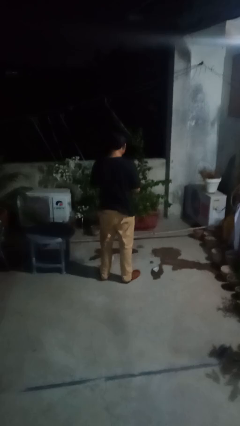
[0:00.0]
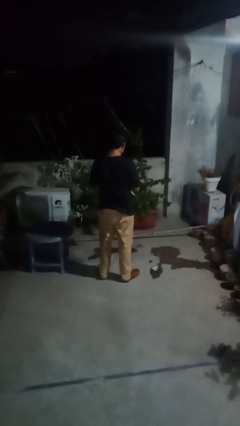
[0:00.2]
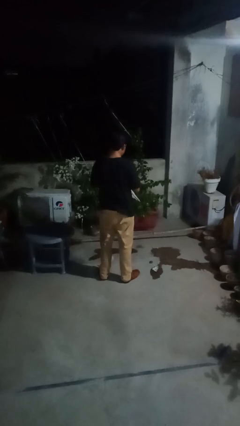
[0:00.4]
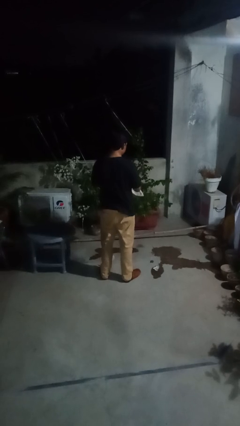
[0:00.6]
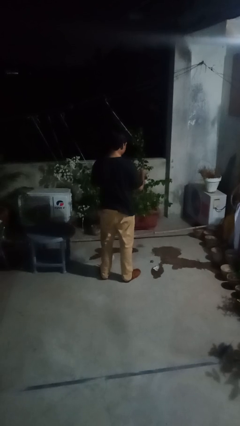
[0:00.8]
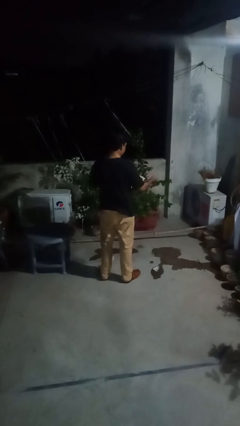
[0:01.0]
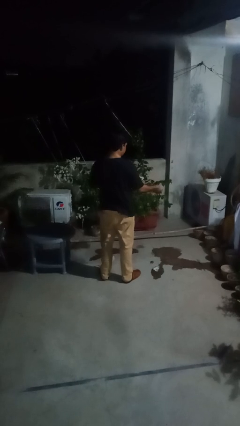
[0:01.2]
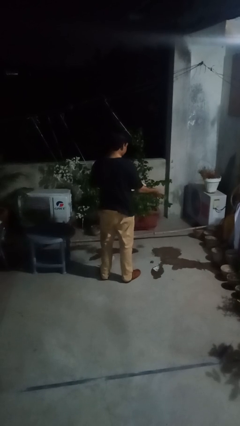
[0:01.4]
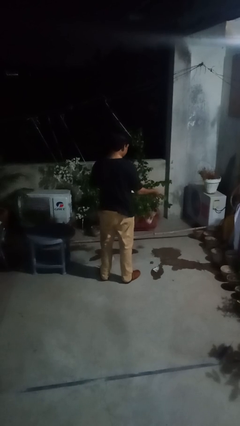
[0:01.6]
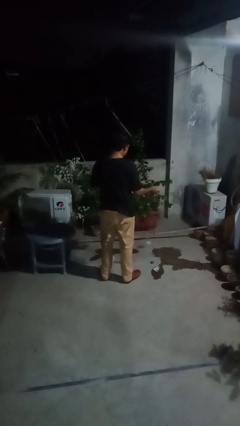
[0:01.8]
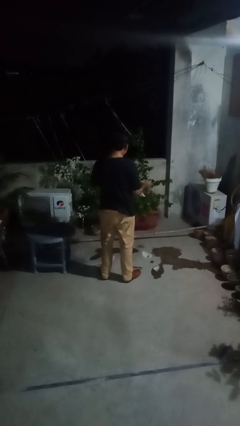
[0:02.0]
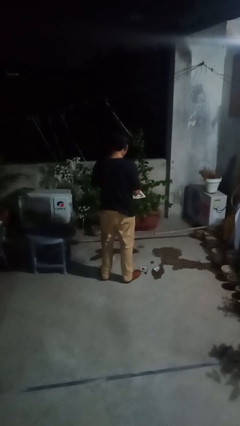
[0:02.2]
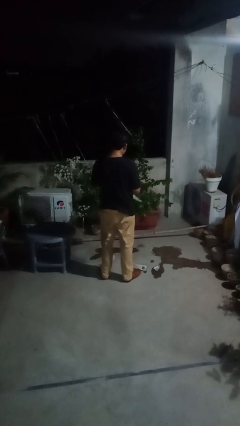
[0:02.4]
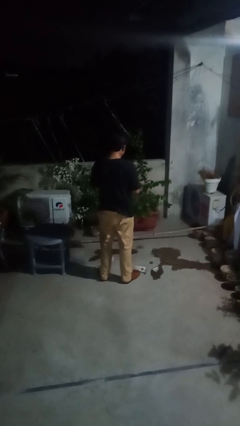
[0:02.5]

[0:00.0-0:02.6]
person tears paper

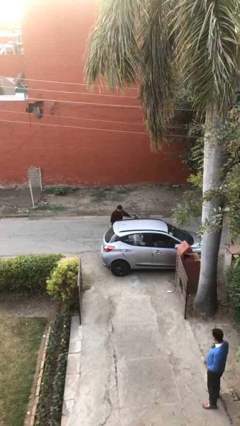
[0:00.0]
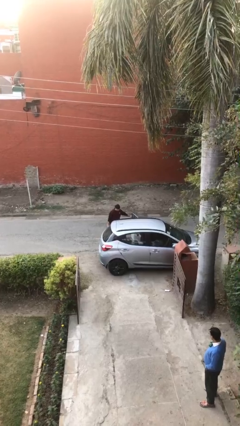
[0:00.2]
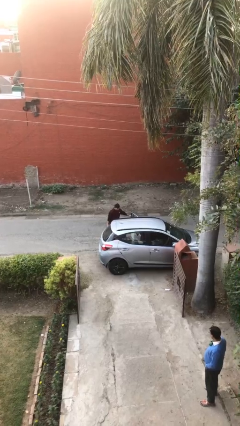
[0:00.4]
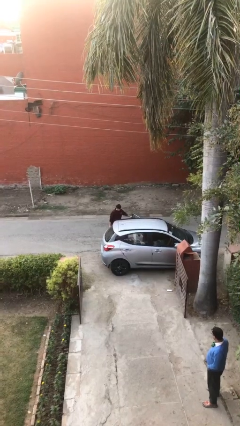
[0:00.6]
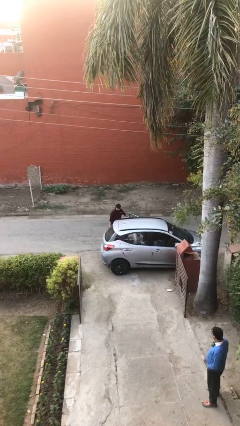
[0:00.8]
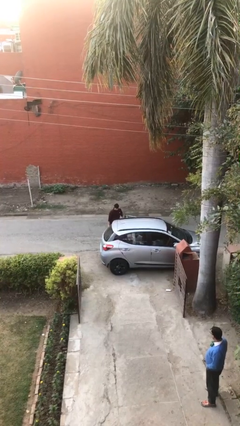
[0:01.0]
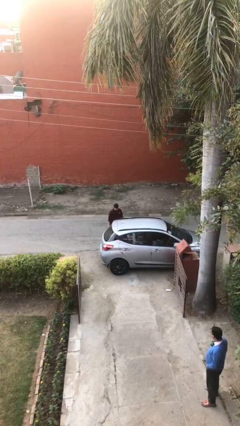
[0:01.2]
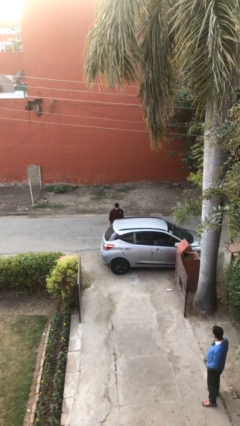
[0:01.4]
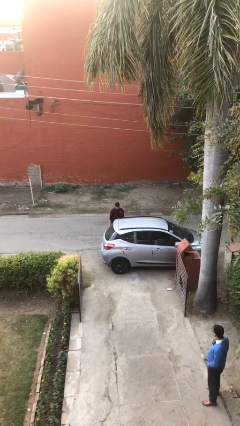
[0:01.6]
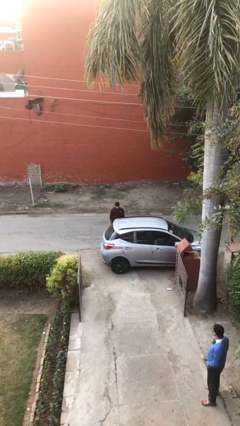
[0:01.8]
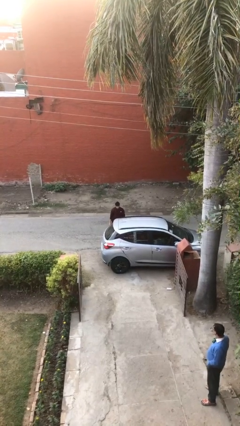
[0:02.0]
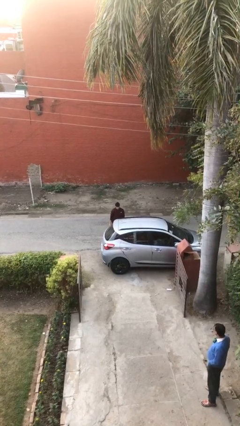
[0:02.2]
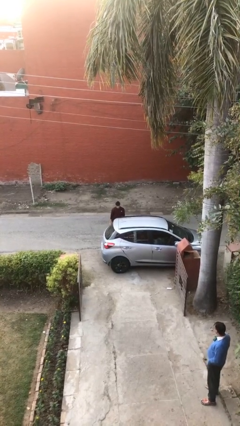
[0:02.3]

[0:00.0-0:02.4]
person closes car door

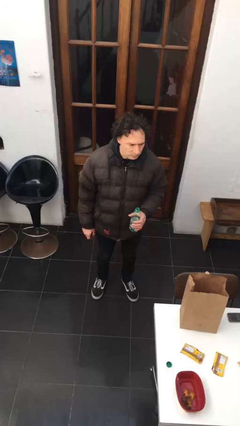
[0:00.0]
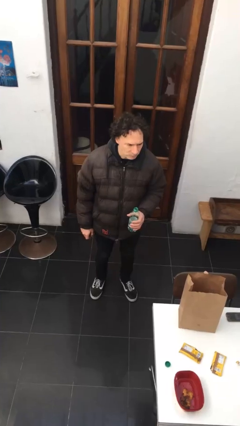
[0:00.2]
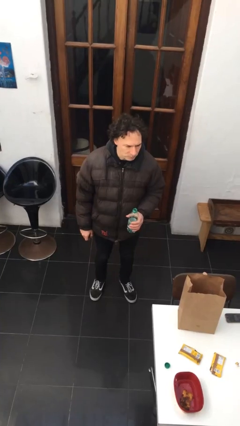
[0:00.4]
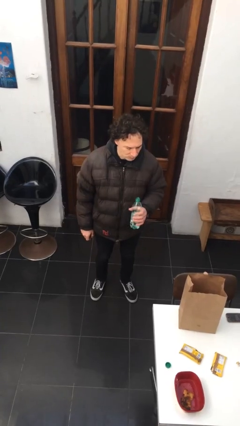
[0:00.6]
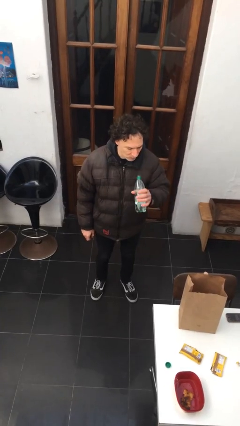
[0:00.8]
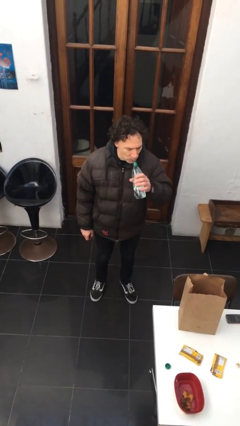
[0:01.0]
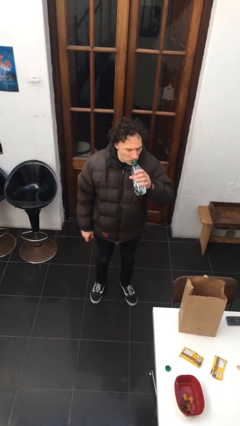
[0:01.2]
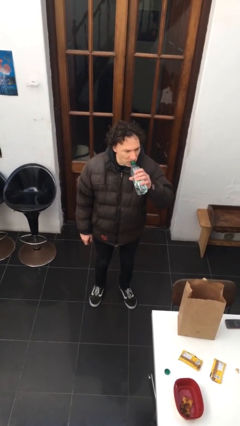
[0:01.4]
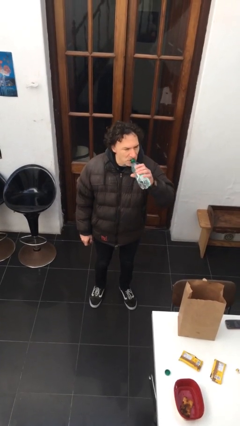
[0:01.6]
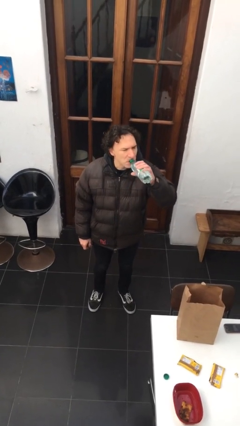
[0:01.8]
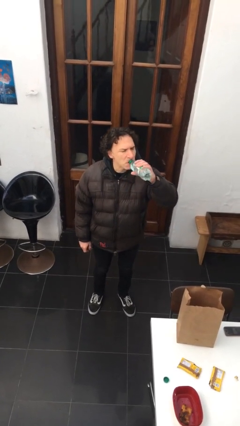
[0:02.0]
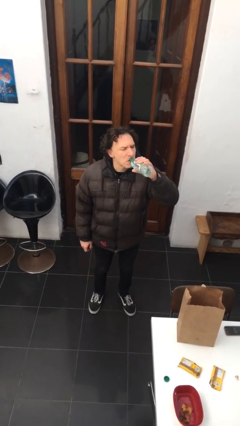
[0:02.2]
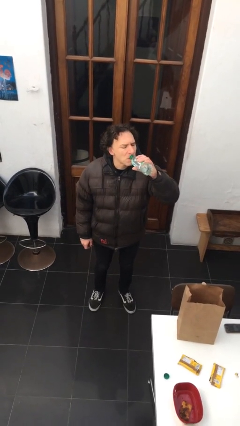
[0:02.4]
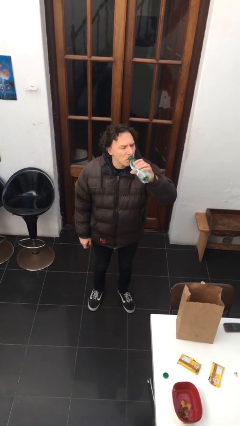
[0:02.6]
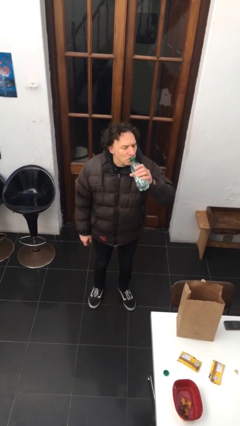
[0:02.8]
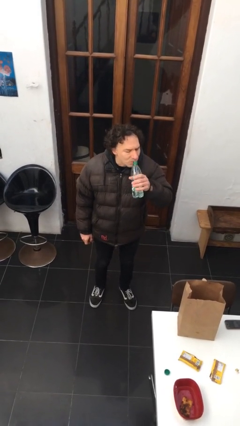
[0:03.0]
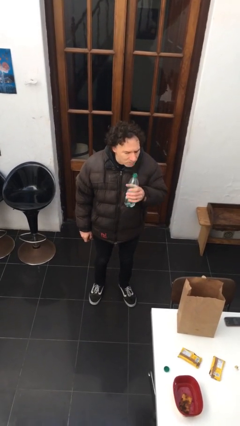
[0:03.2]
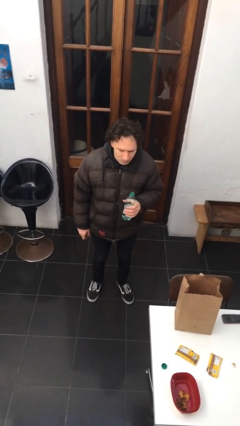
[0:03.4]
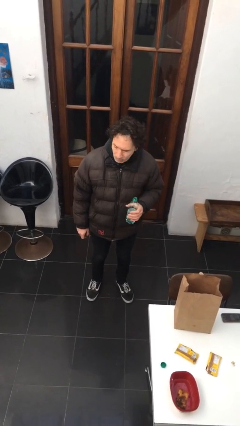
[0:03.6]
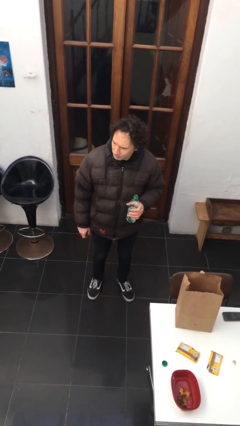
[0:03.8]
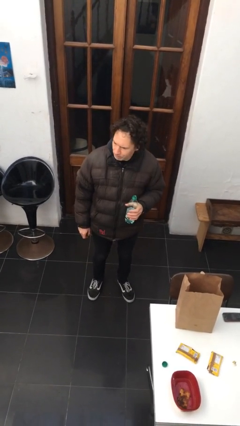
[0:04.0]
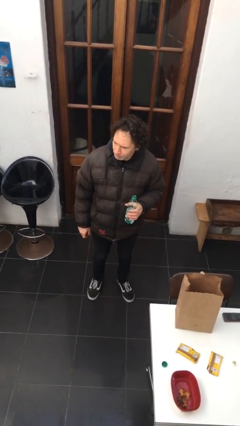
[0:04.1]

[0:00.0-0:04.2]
person drinks from bottle

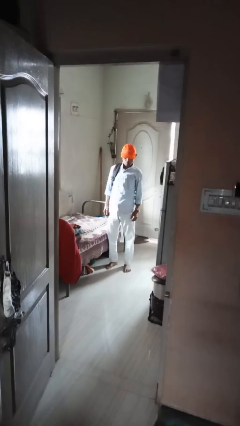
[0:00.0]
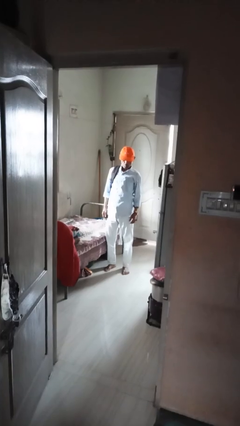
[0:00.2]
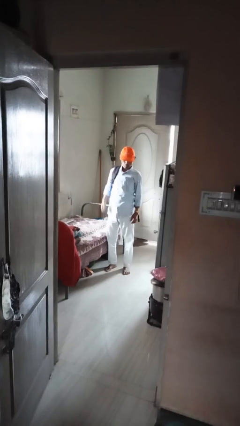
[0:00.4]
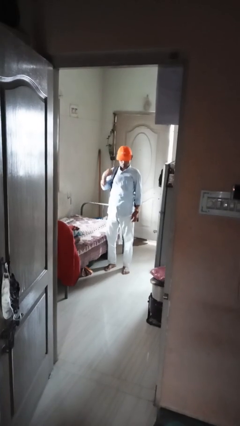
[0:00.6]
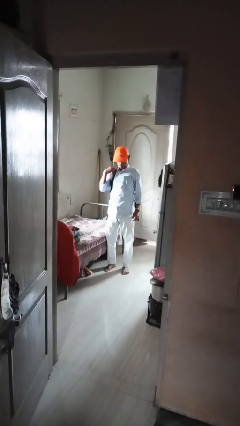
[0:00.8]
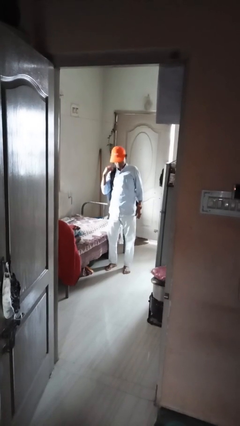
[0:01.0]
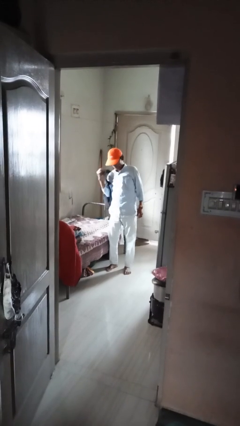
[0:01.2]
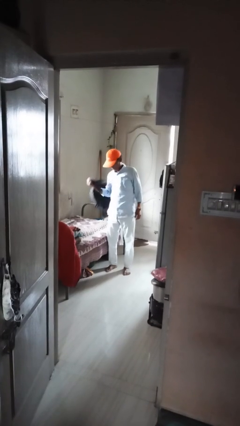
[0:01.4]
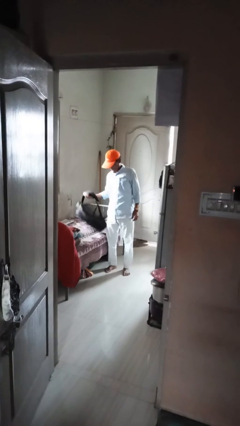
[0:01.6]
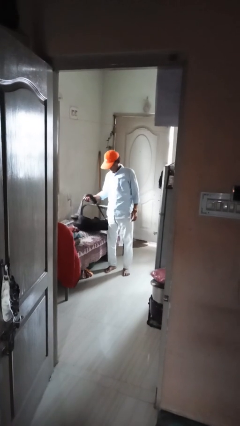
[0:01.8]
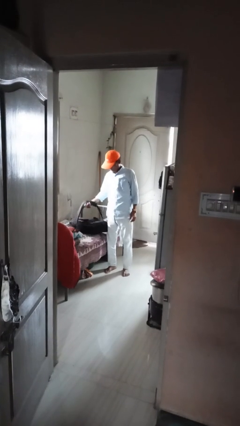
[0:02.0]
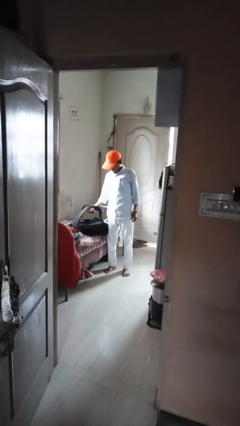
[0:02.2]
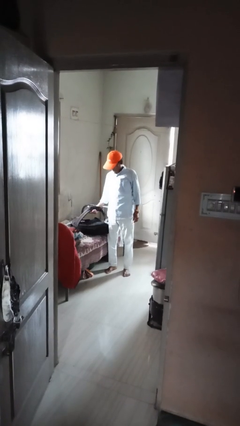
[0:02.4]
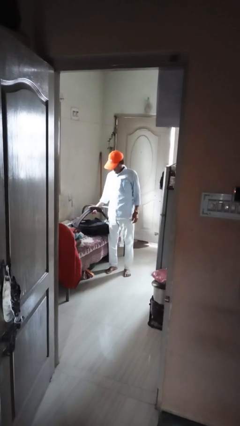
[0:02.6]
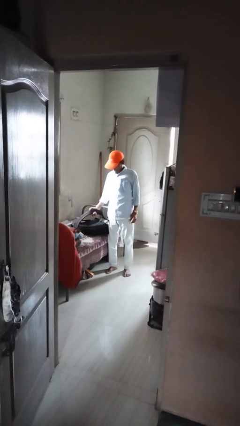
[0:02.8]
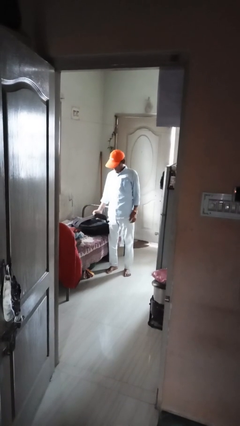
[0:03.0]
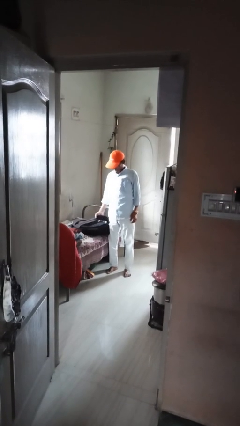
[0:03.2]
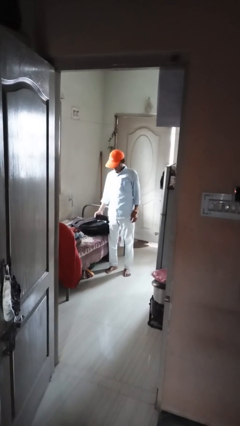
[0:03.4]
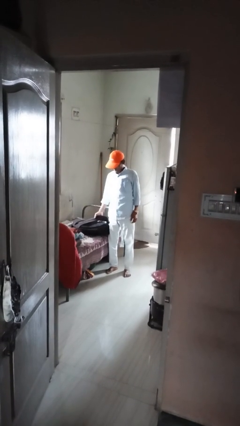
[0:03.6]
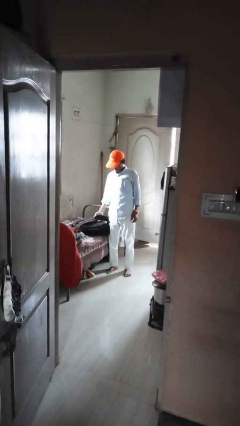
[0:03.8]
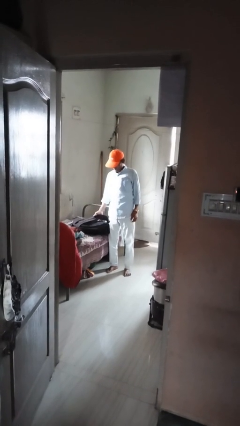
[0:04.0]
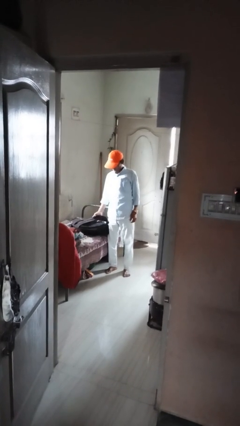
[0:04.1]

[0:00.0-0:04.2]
person takes off backpack

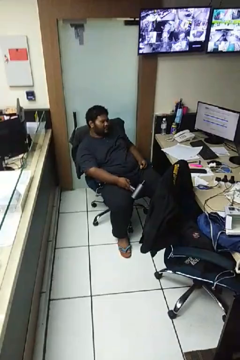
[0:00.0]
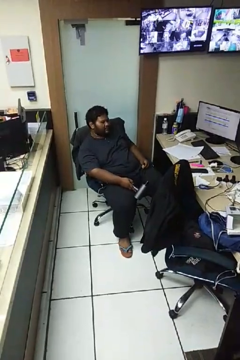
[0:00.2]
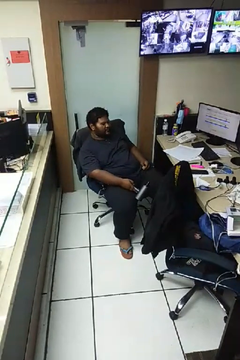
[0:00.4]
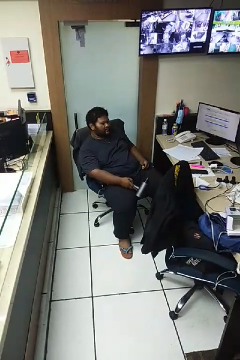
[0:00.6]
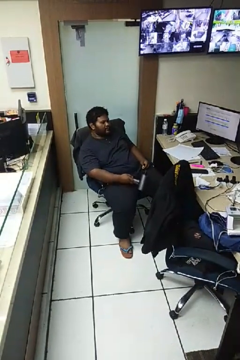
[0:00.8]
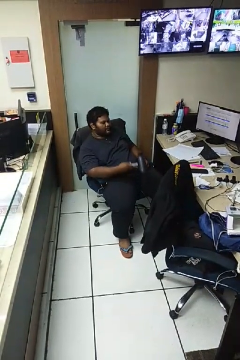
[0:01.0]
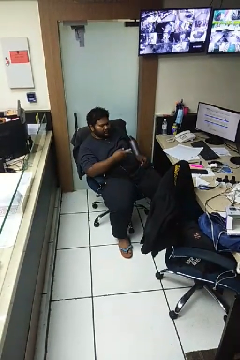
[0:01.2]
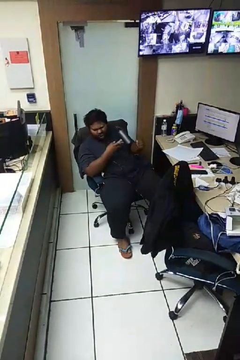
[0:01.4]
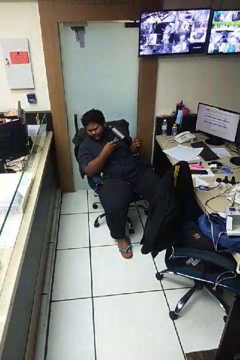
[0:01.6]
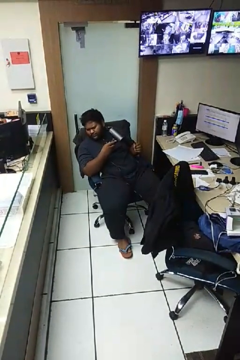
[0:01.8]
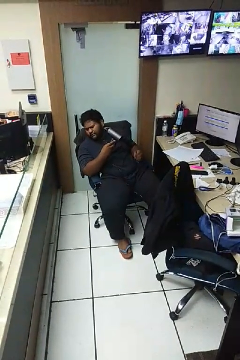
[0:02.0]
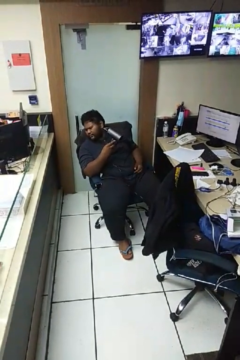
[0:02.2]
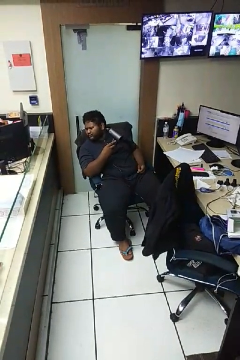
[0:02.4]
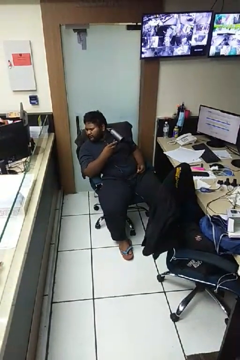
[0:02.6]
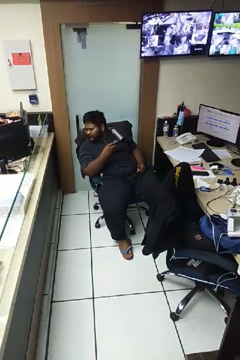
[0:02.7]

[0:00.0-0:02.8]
person dries hair with hairdryer

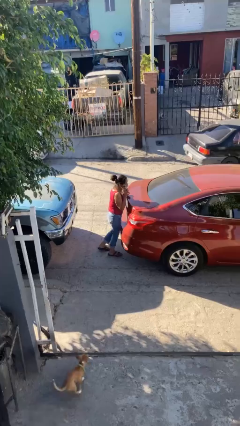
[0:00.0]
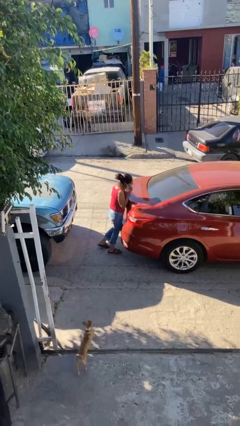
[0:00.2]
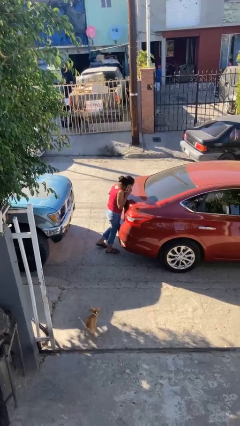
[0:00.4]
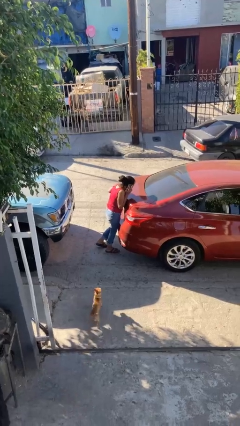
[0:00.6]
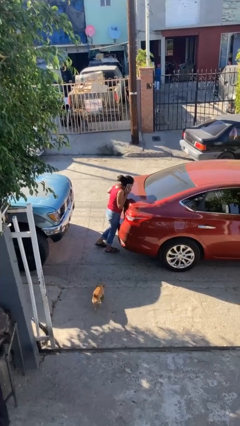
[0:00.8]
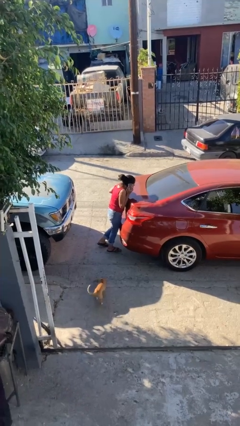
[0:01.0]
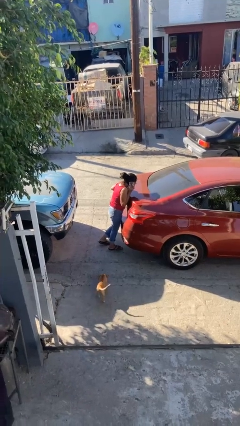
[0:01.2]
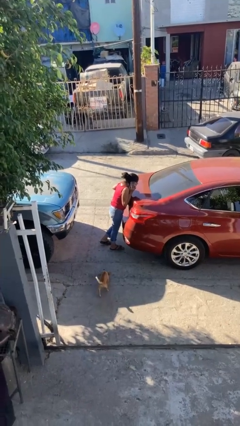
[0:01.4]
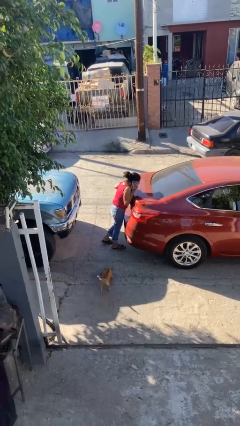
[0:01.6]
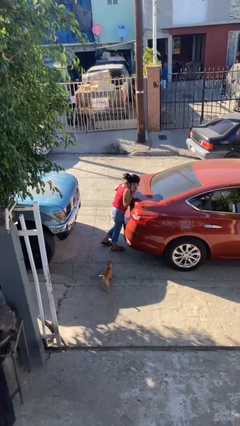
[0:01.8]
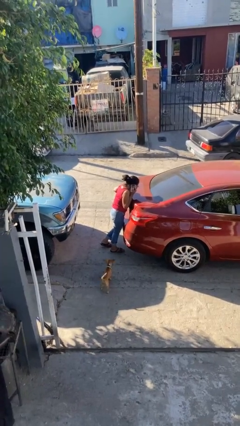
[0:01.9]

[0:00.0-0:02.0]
person leans against car
